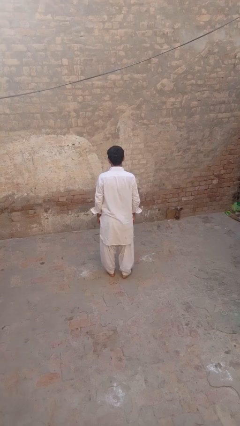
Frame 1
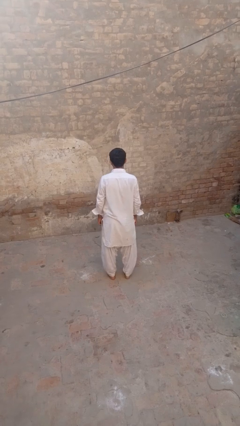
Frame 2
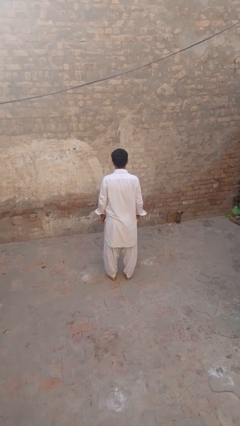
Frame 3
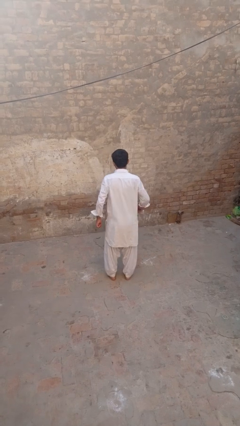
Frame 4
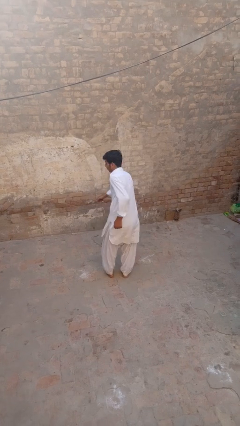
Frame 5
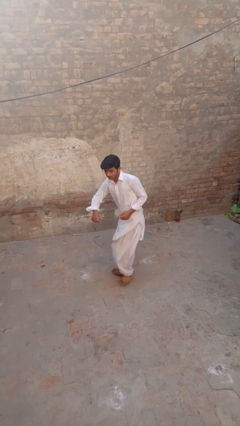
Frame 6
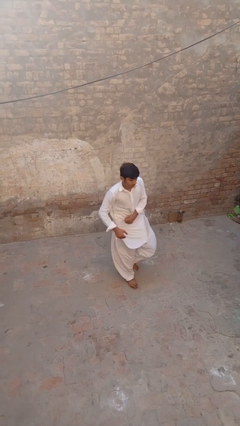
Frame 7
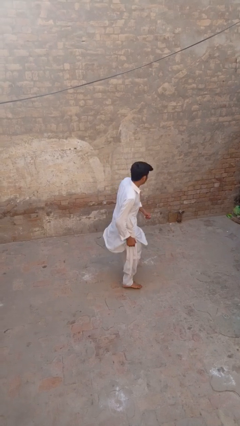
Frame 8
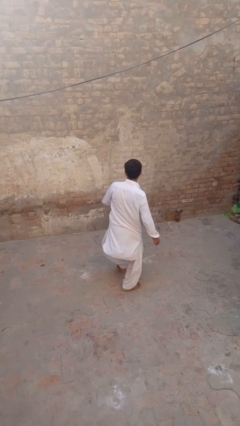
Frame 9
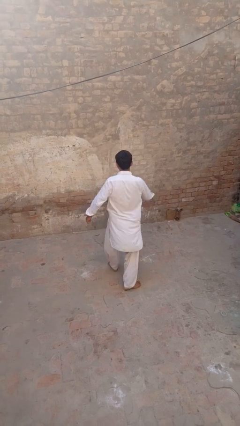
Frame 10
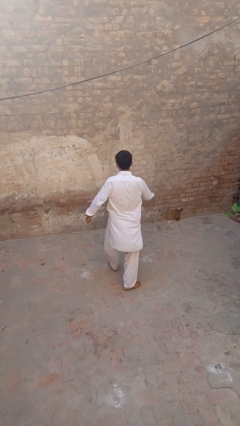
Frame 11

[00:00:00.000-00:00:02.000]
person twirls

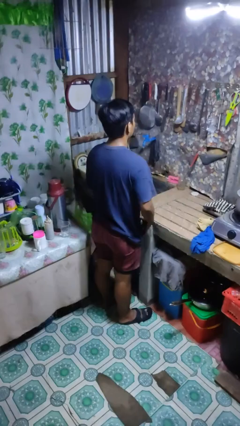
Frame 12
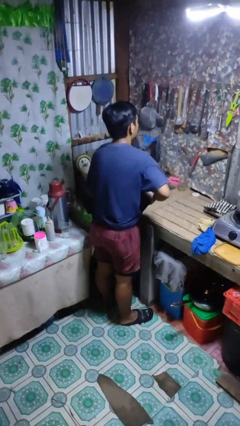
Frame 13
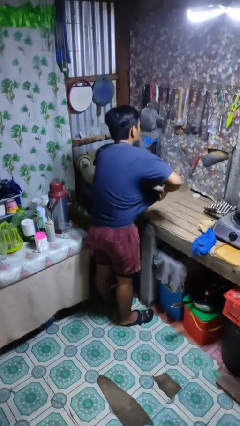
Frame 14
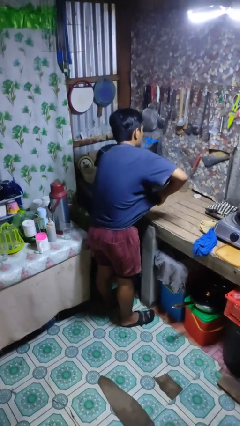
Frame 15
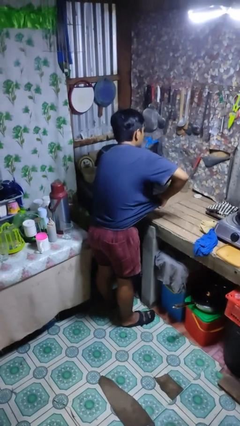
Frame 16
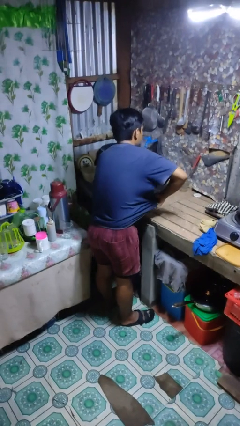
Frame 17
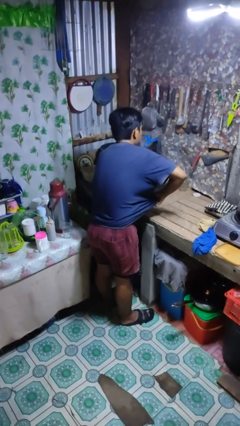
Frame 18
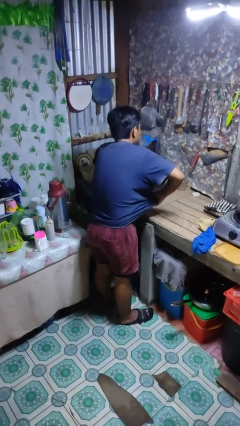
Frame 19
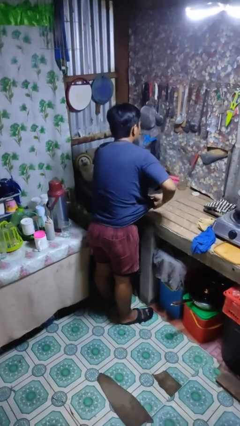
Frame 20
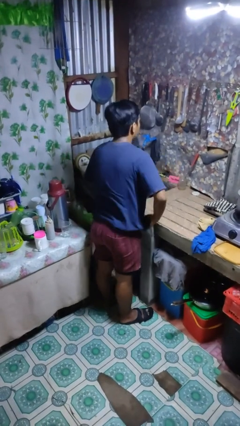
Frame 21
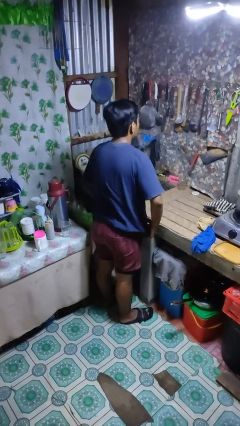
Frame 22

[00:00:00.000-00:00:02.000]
person applies deodorant

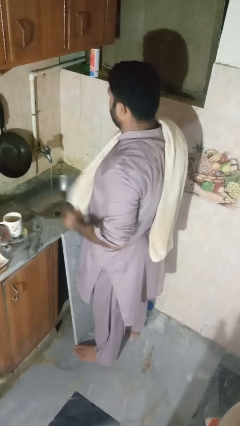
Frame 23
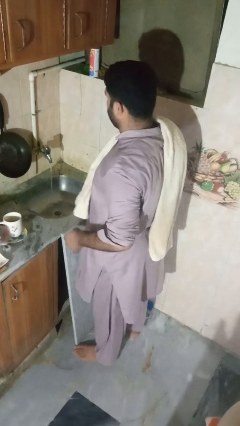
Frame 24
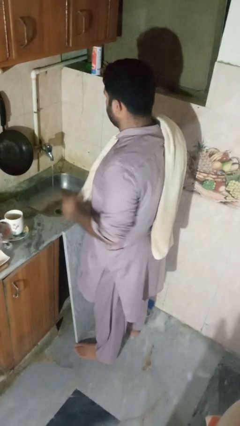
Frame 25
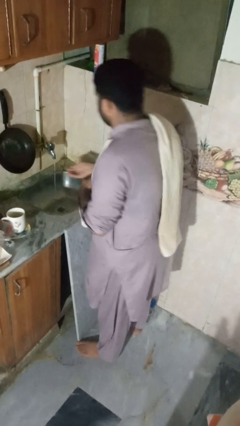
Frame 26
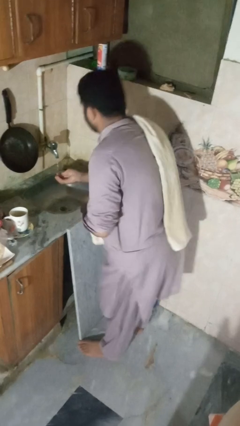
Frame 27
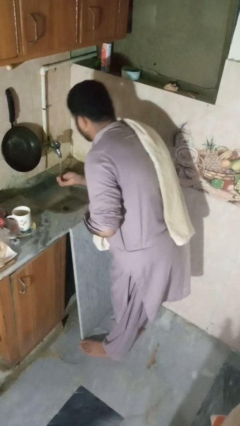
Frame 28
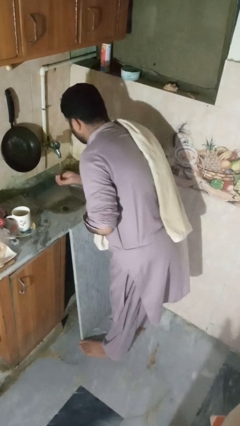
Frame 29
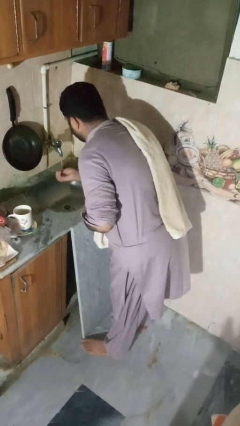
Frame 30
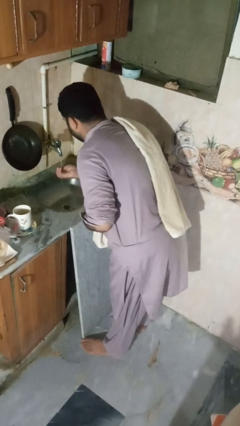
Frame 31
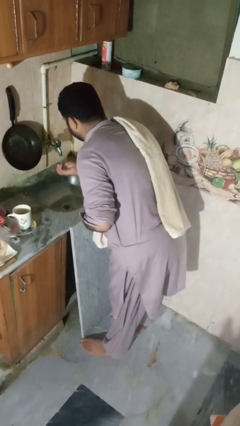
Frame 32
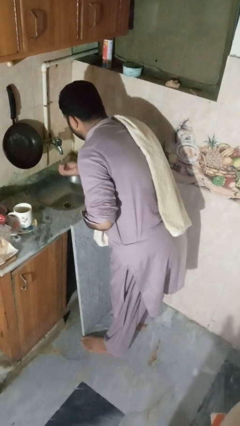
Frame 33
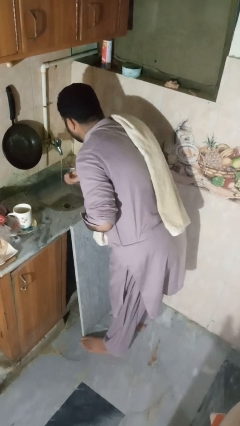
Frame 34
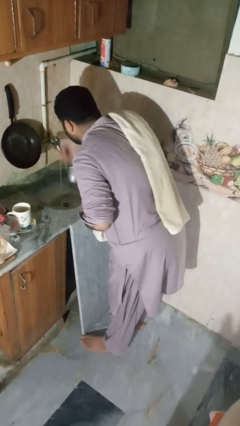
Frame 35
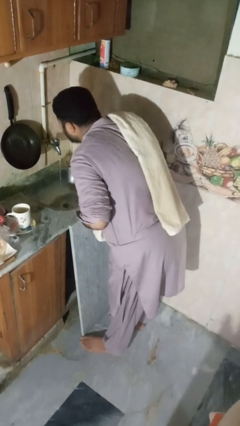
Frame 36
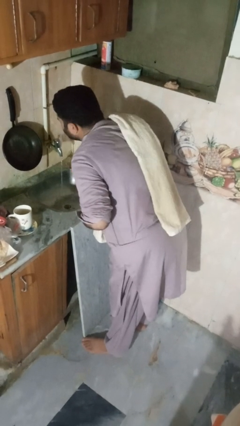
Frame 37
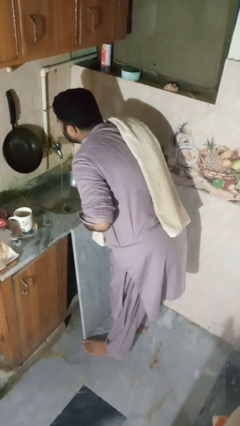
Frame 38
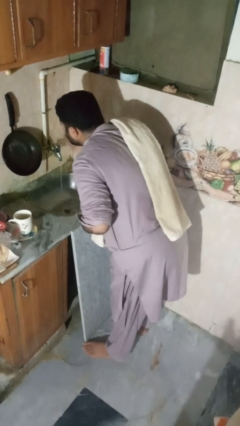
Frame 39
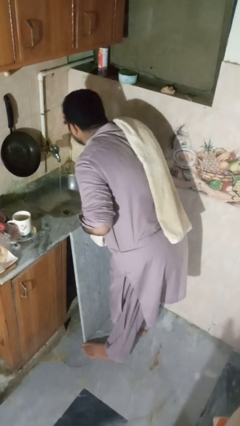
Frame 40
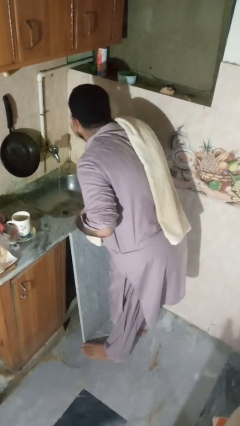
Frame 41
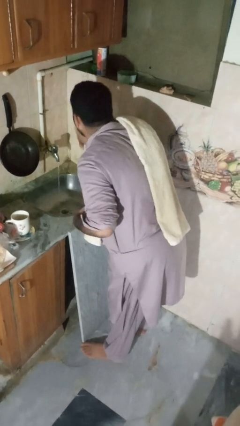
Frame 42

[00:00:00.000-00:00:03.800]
person washes face

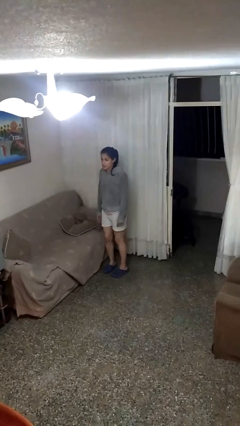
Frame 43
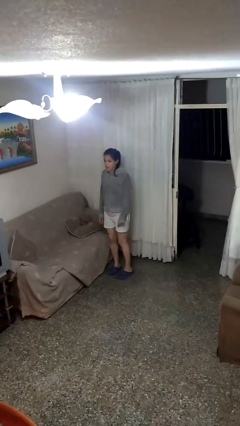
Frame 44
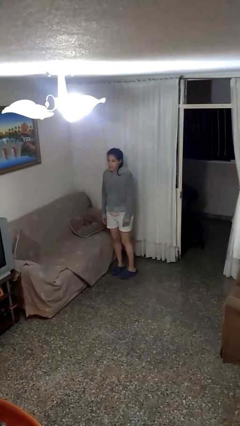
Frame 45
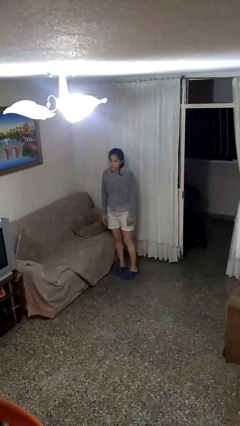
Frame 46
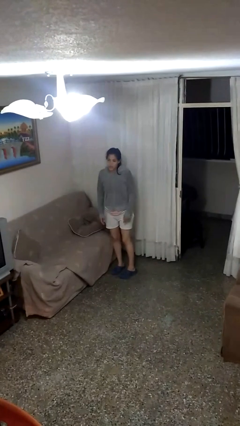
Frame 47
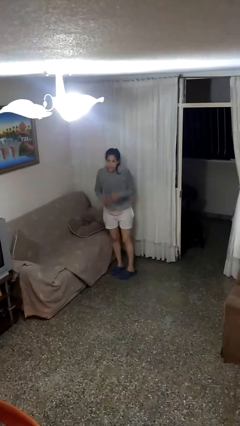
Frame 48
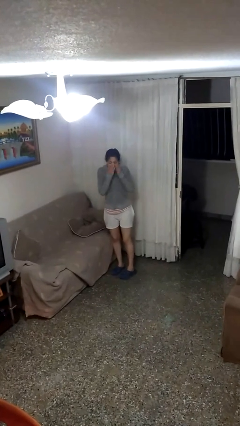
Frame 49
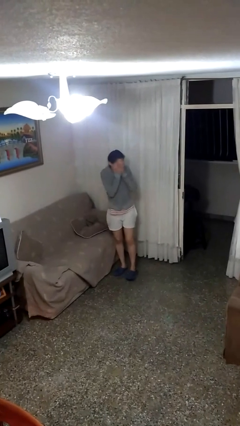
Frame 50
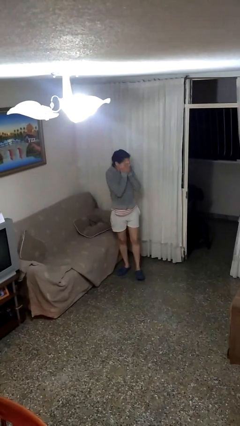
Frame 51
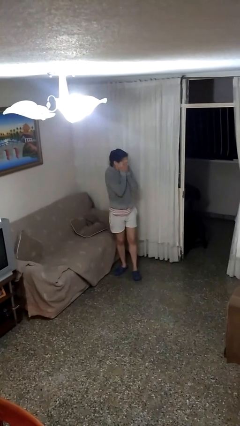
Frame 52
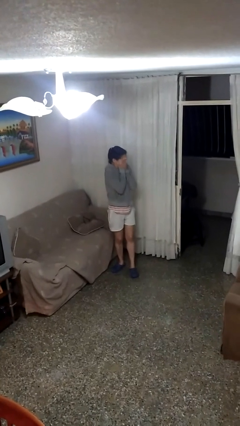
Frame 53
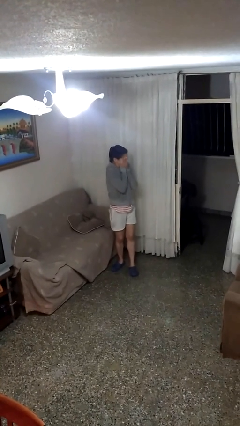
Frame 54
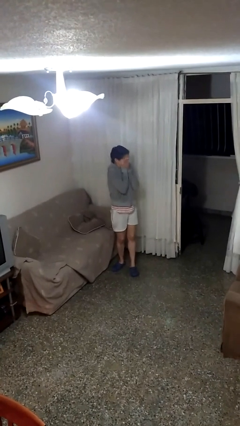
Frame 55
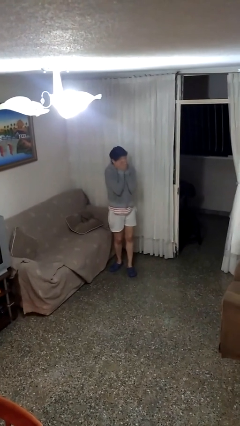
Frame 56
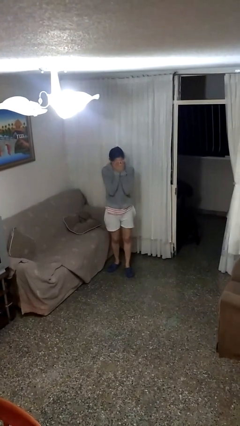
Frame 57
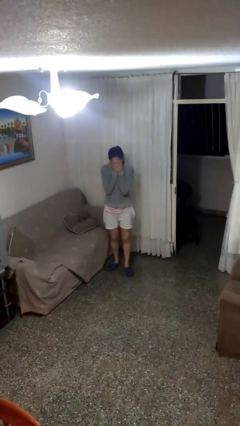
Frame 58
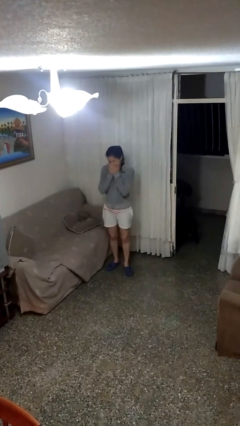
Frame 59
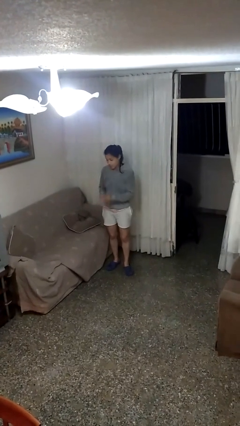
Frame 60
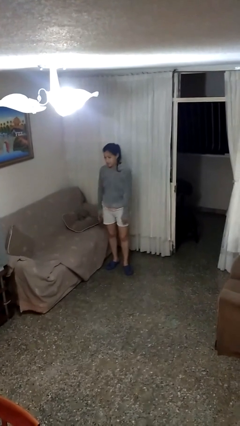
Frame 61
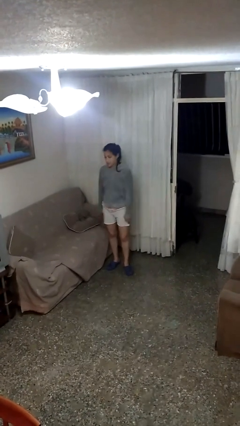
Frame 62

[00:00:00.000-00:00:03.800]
person covers face with hands

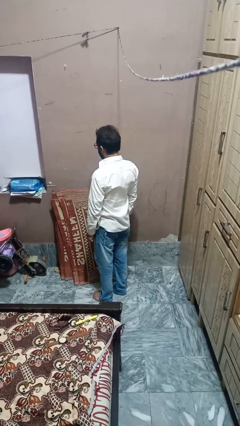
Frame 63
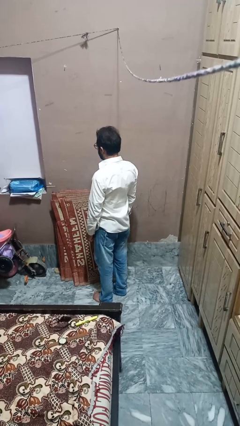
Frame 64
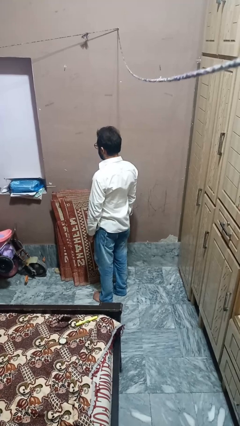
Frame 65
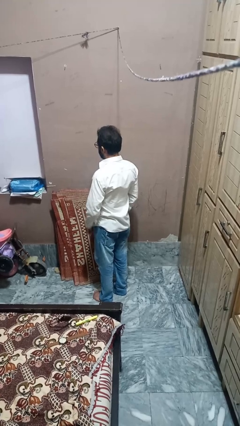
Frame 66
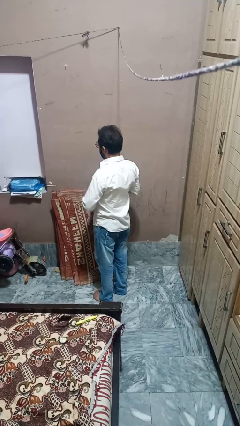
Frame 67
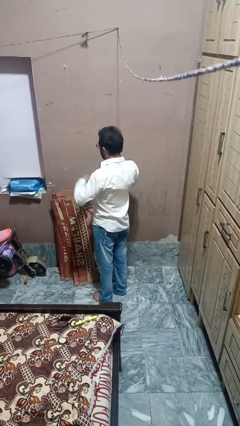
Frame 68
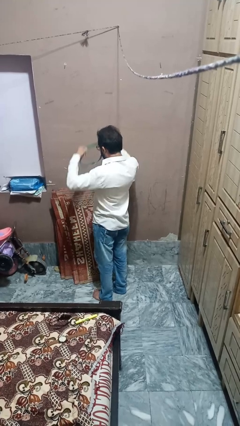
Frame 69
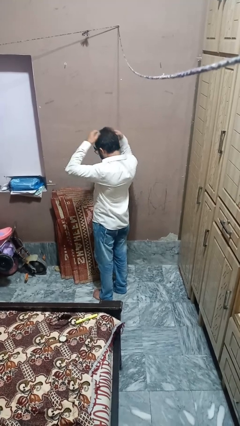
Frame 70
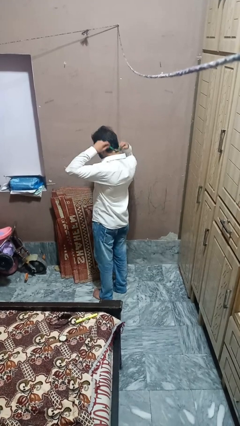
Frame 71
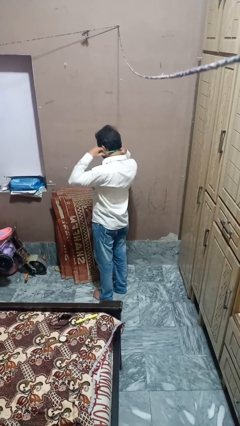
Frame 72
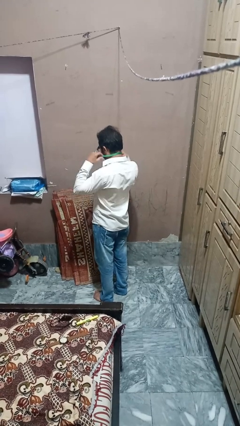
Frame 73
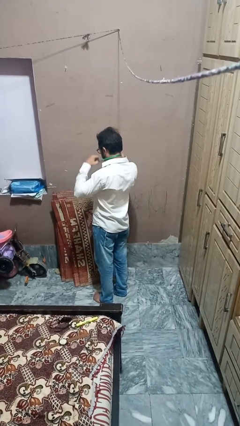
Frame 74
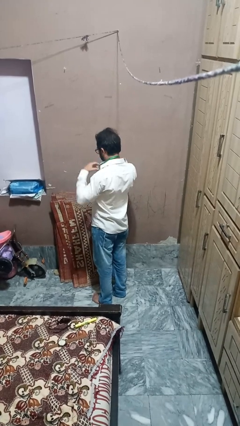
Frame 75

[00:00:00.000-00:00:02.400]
person puts on necklace

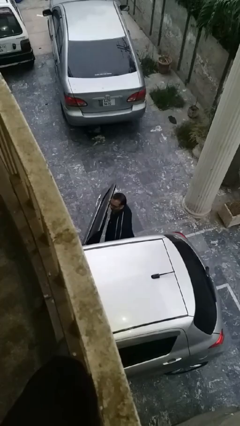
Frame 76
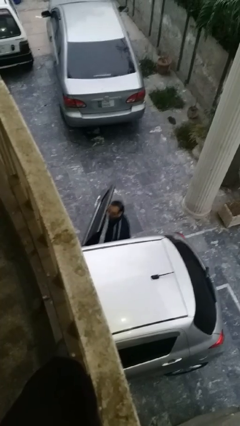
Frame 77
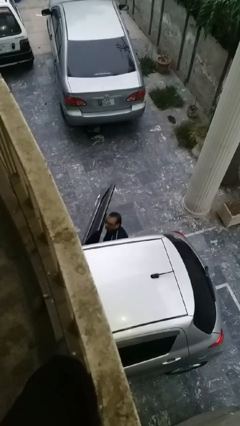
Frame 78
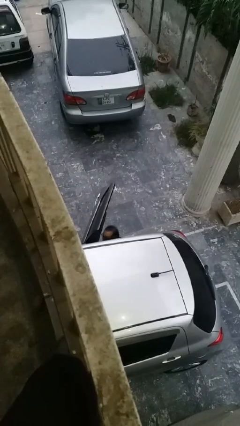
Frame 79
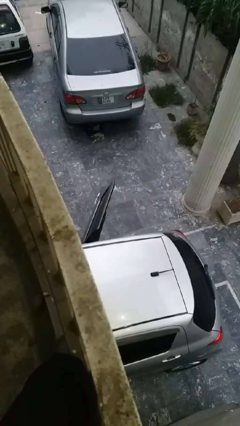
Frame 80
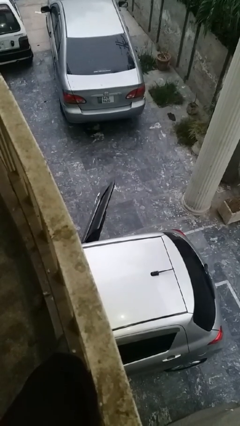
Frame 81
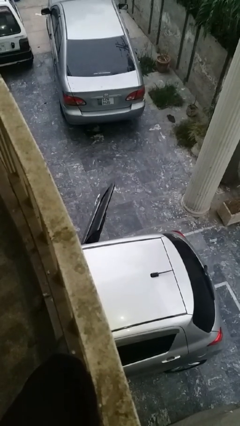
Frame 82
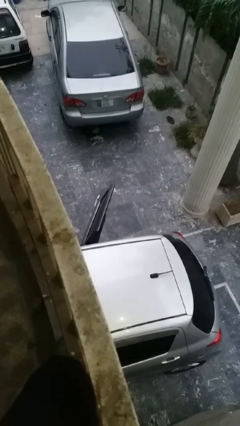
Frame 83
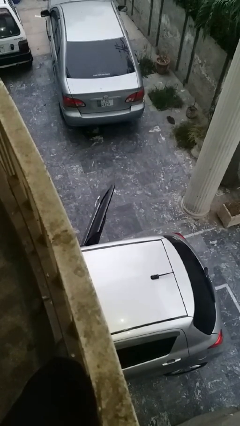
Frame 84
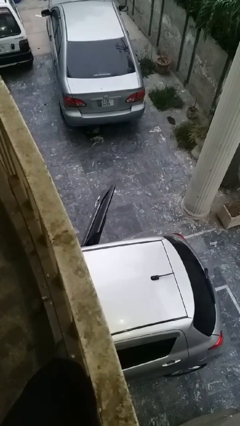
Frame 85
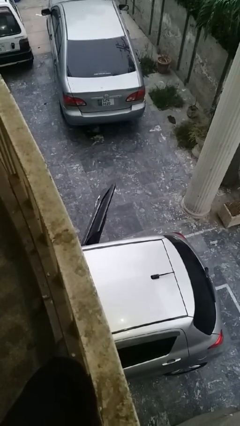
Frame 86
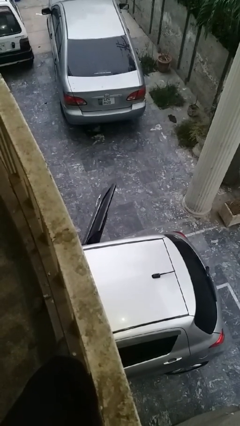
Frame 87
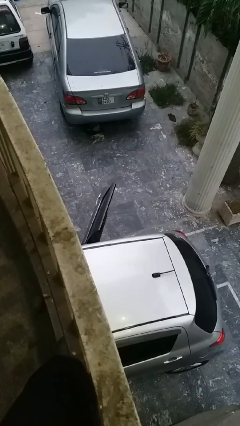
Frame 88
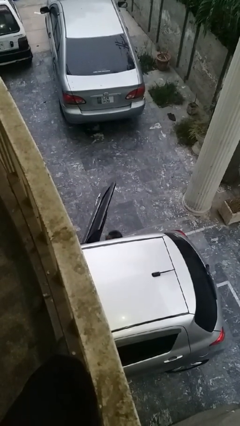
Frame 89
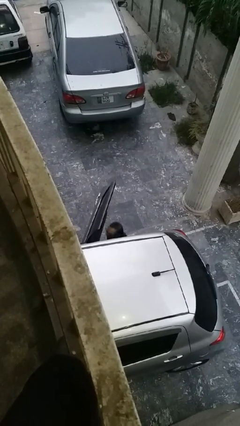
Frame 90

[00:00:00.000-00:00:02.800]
person enters car

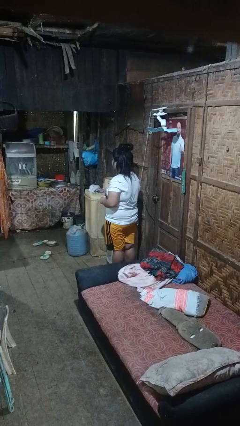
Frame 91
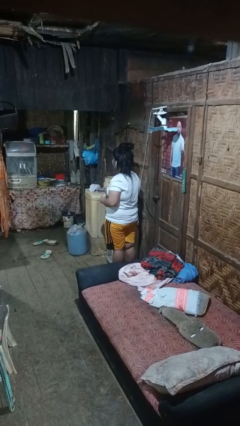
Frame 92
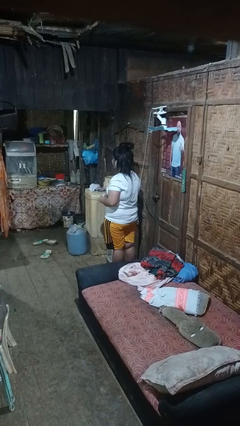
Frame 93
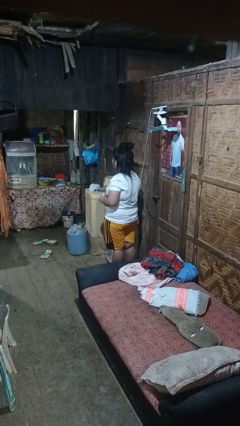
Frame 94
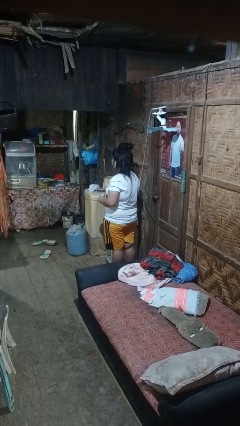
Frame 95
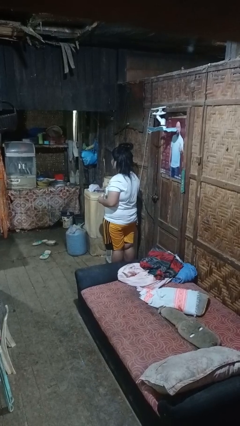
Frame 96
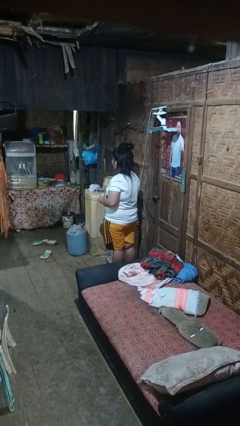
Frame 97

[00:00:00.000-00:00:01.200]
person stirs mug
